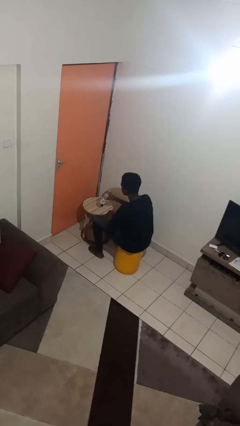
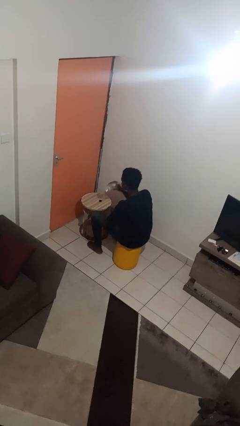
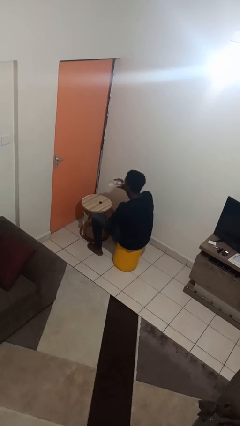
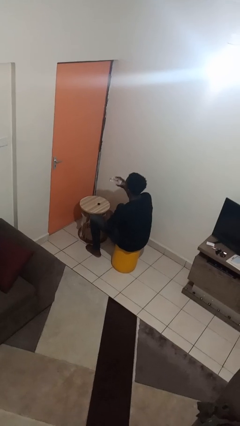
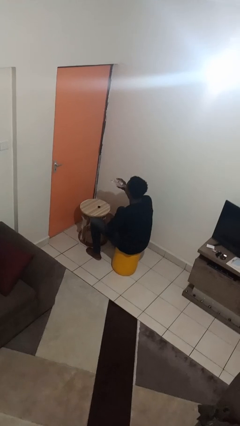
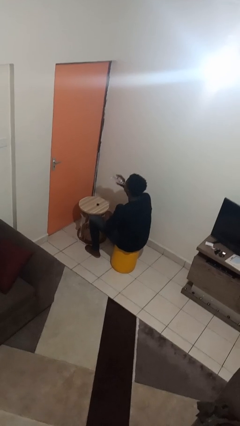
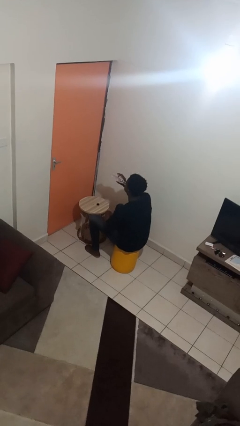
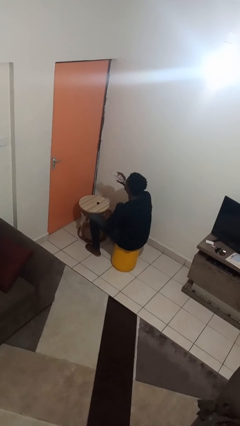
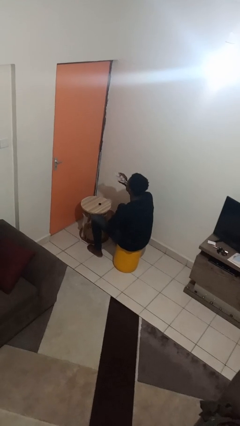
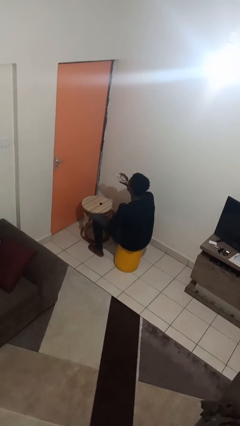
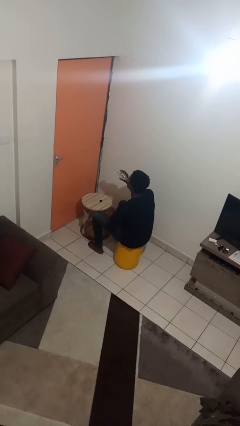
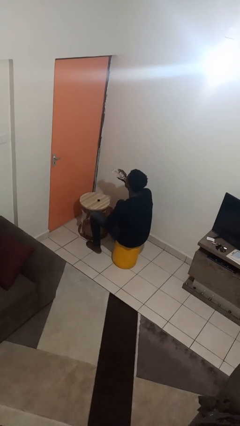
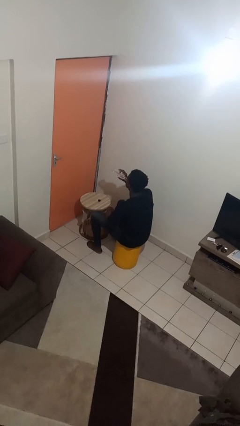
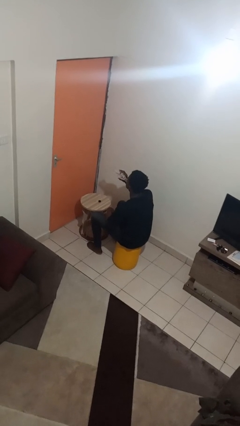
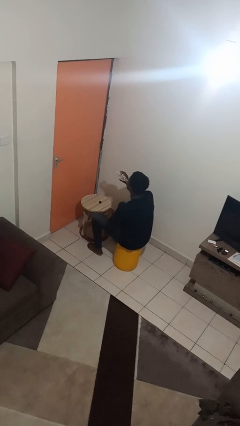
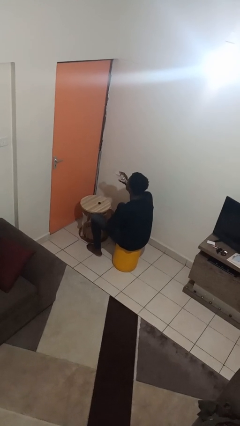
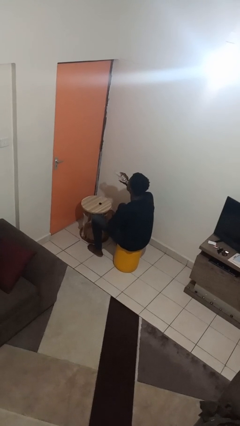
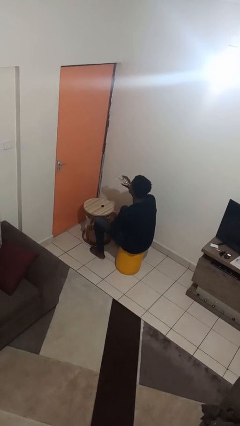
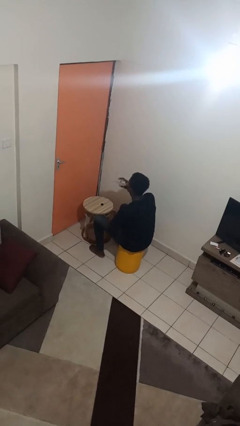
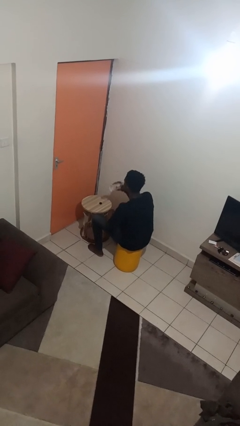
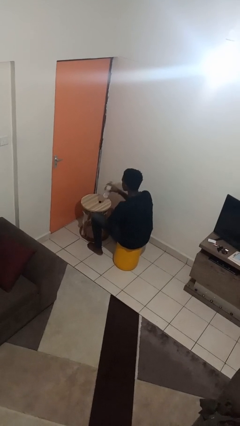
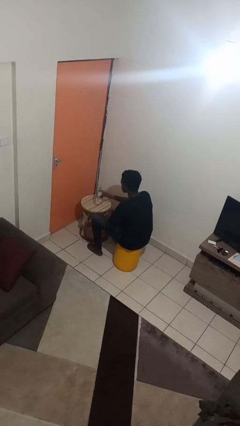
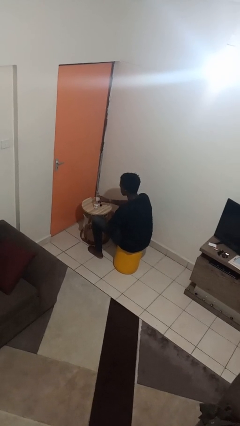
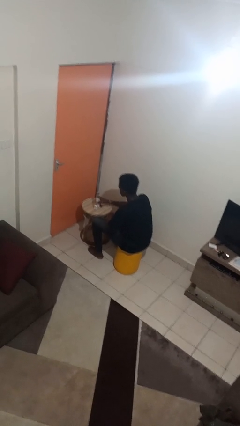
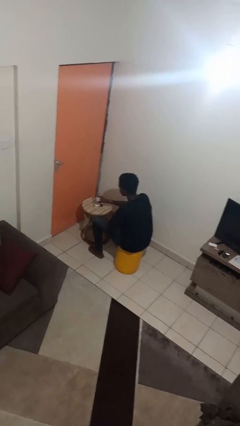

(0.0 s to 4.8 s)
person drinks from bottle

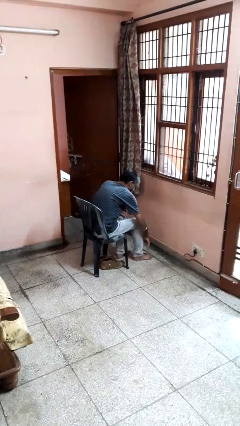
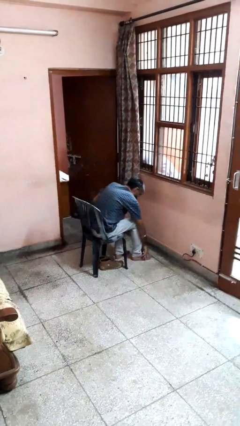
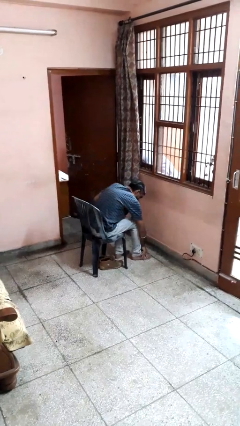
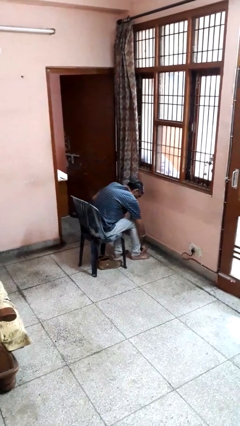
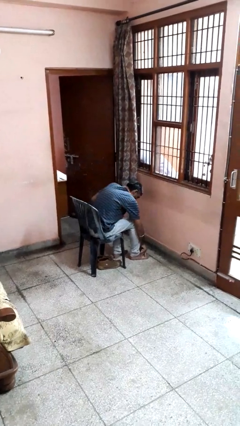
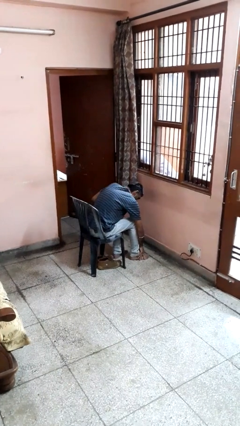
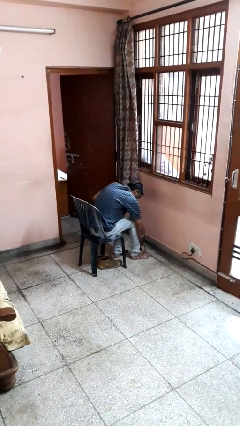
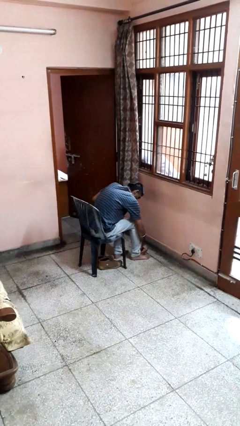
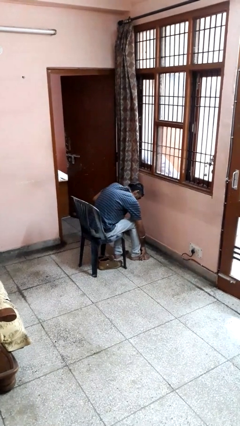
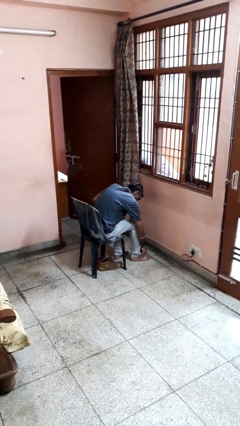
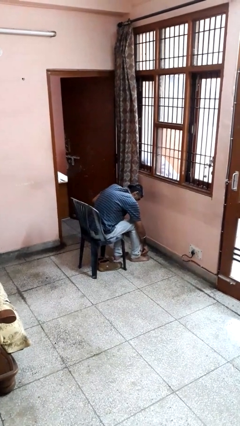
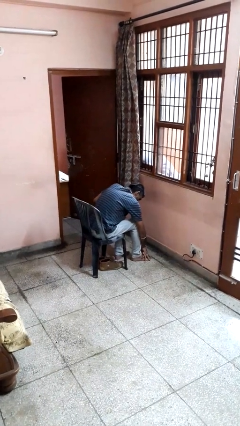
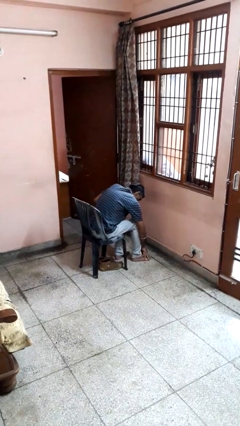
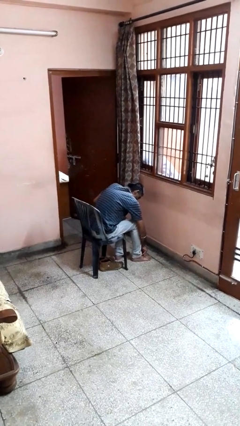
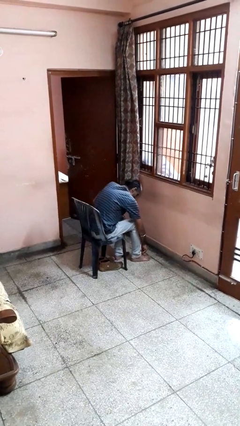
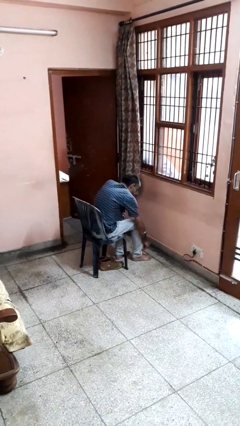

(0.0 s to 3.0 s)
person rubs foot

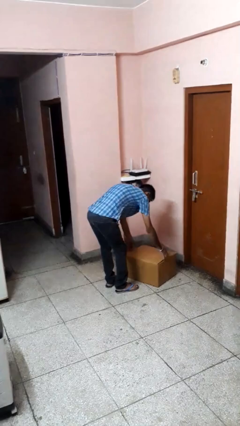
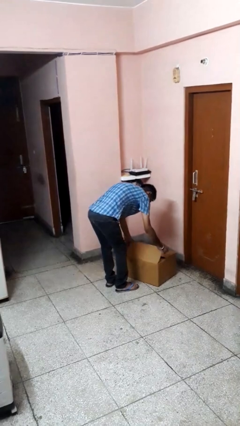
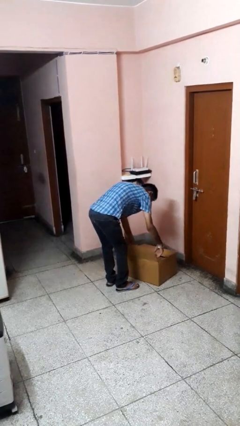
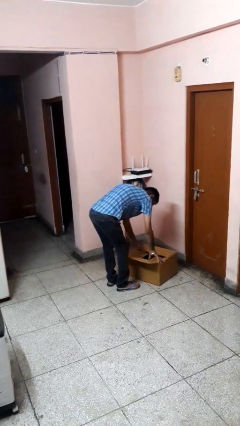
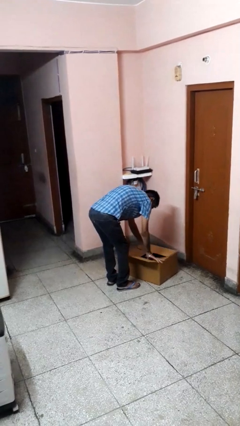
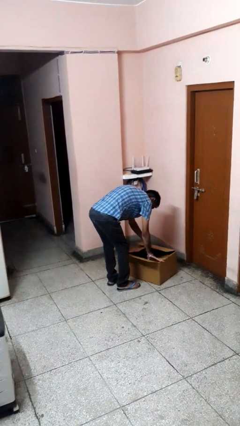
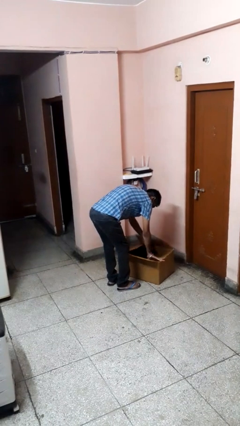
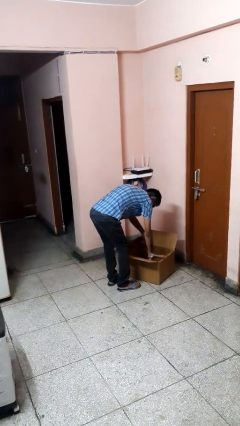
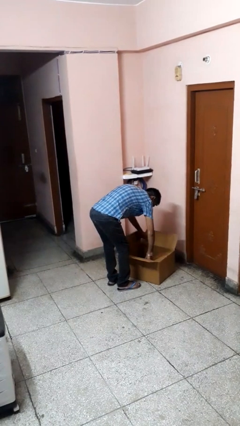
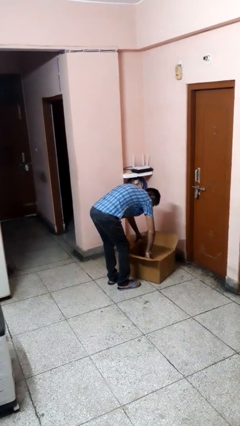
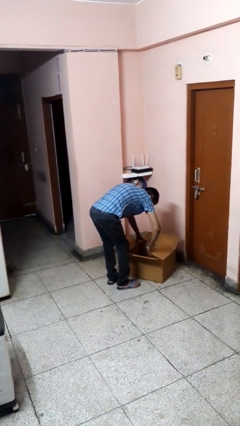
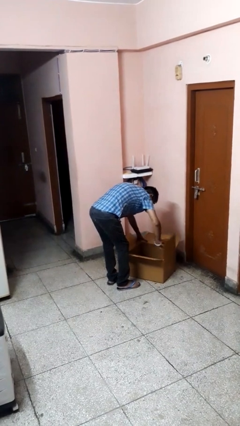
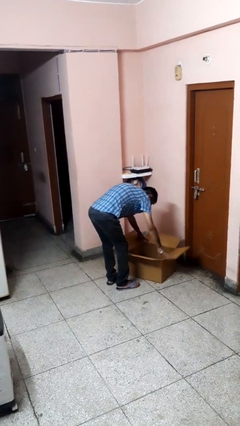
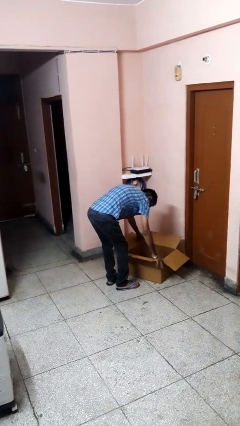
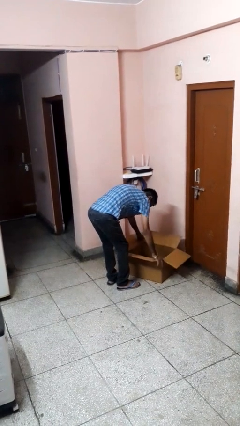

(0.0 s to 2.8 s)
person opens box

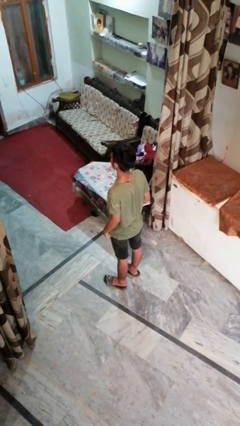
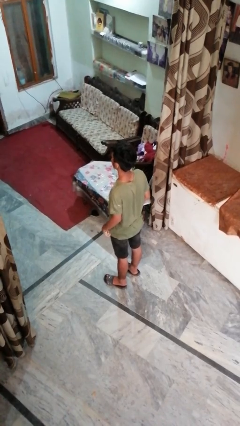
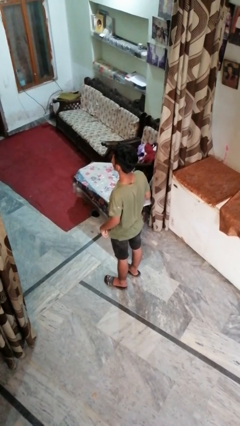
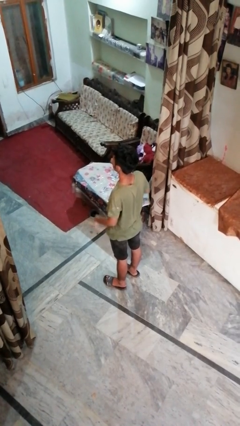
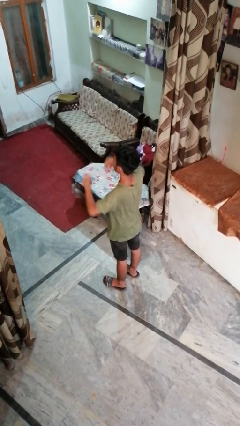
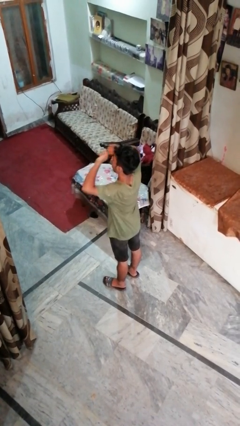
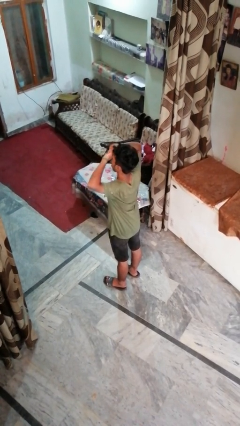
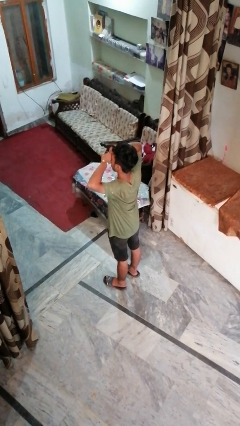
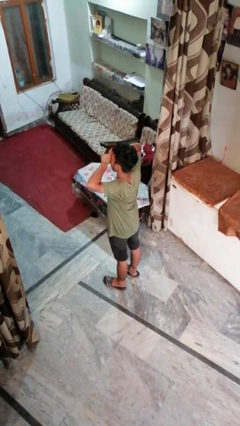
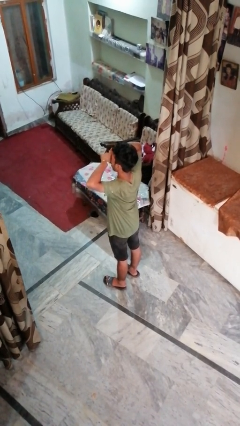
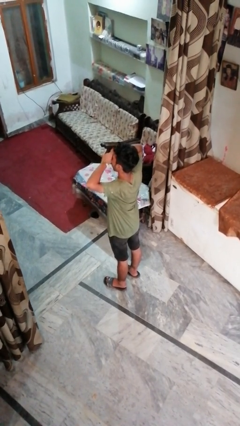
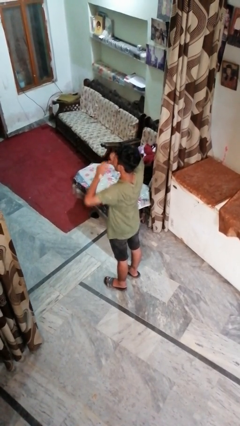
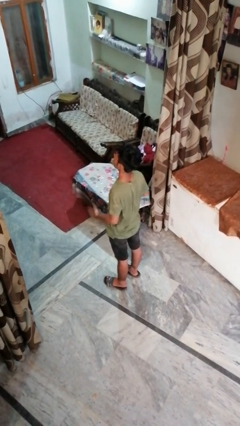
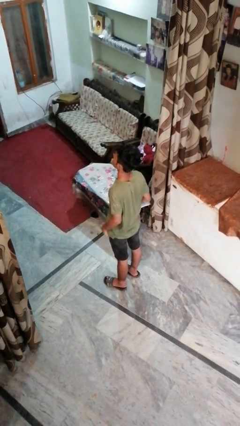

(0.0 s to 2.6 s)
person rubs eyes

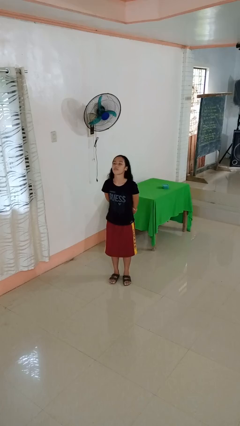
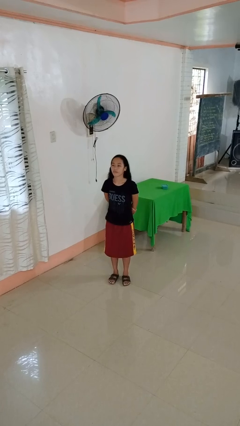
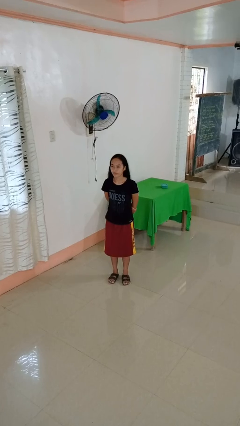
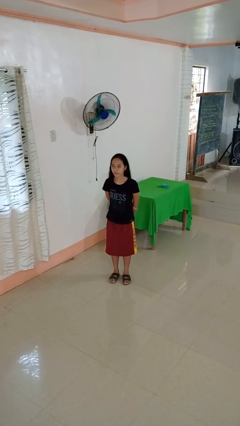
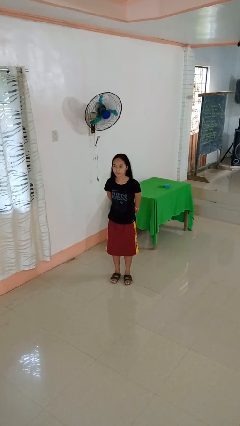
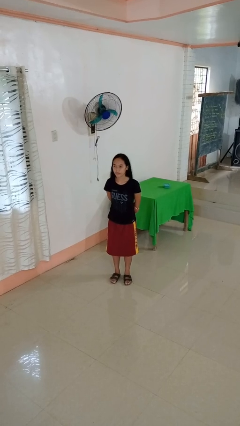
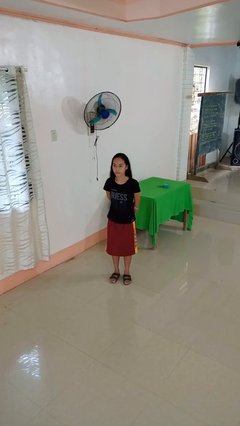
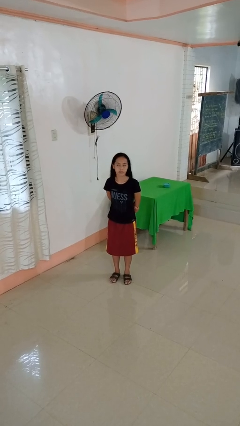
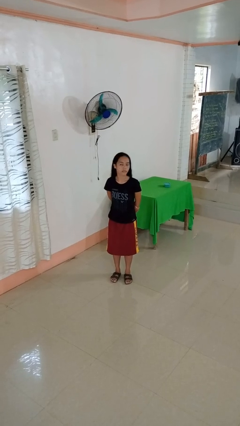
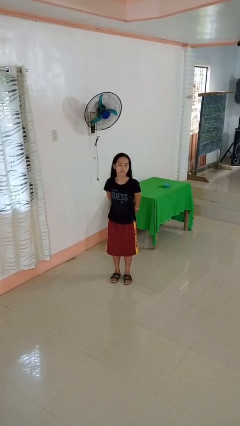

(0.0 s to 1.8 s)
person nods head

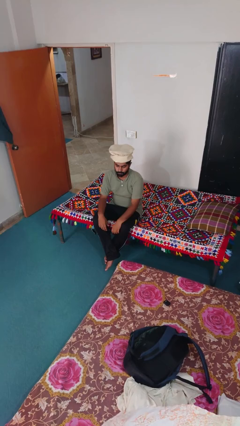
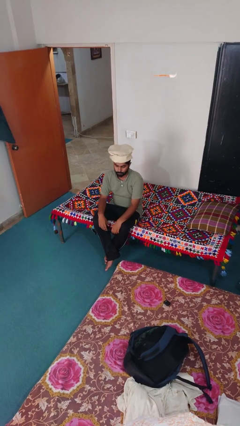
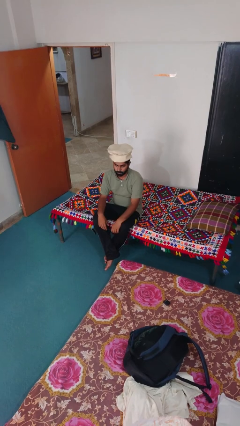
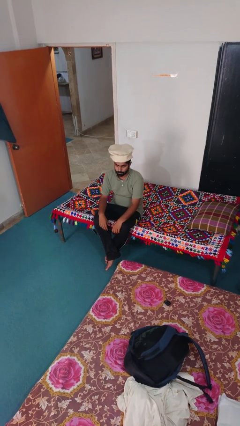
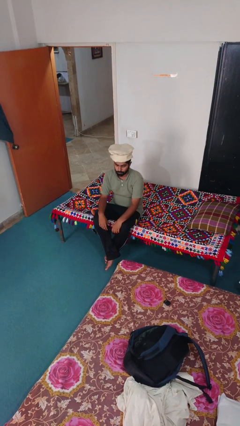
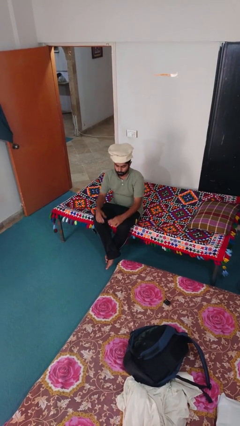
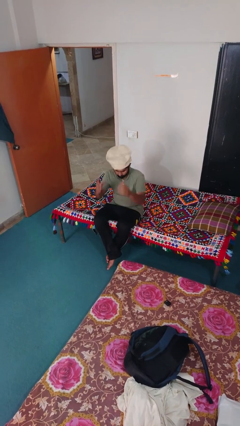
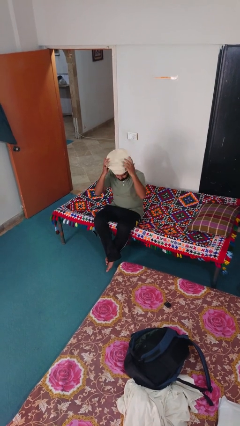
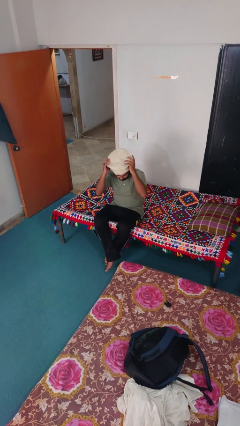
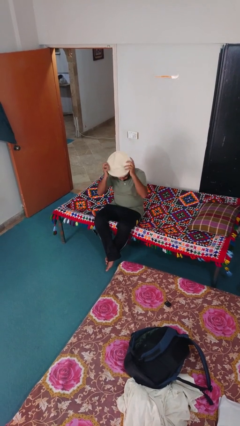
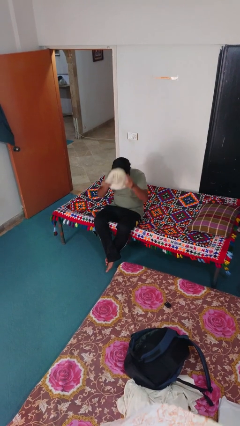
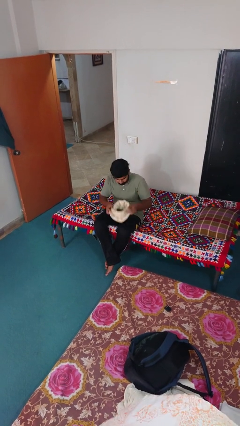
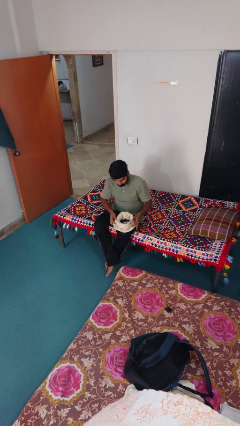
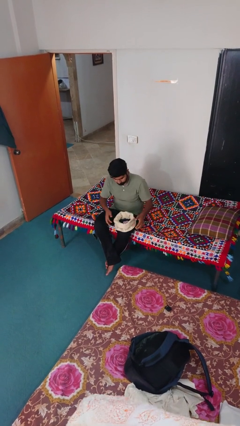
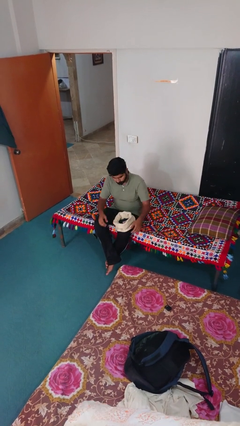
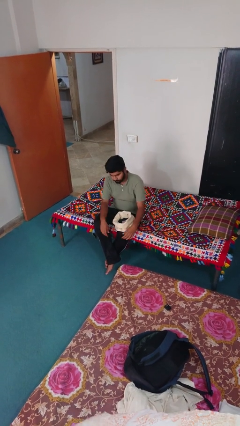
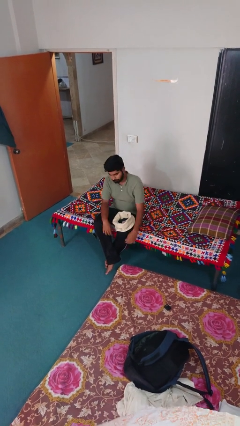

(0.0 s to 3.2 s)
person takes off hat
